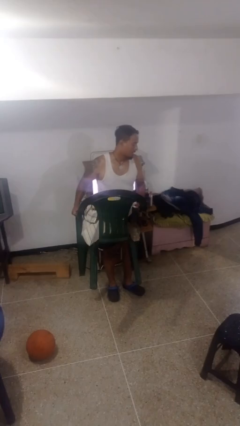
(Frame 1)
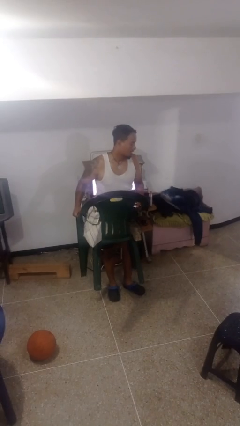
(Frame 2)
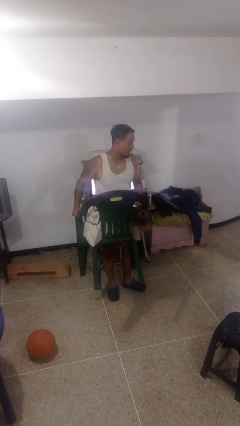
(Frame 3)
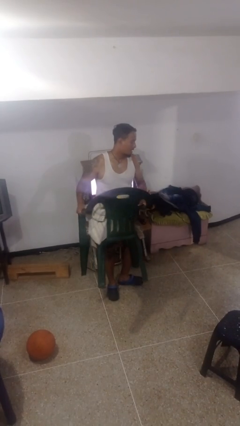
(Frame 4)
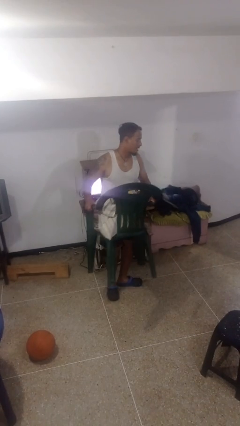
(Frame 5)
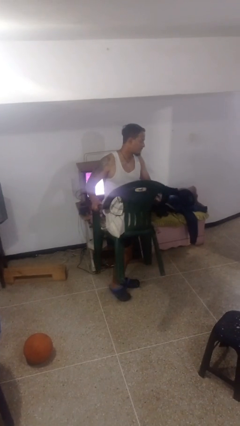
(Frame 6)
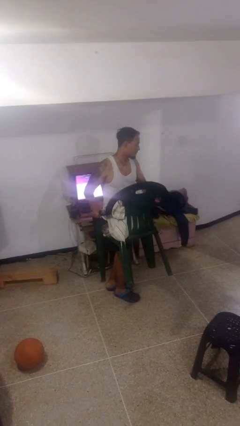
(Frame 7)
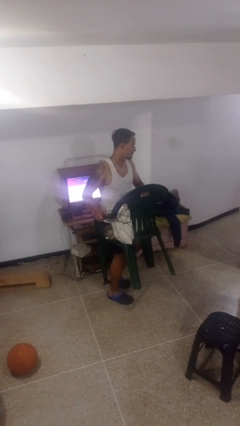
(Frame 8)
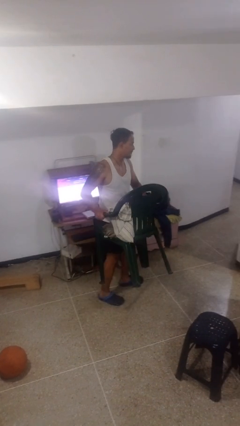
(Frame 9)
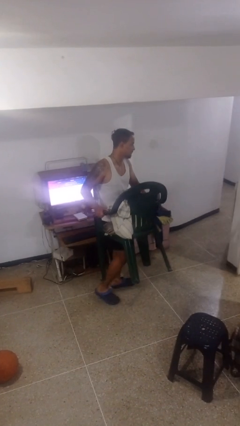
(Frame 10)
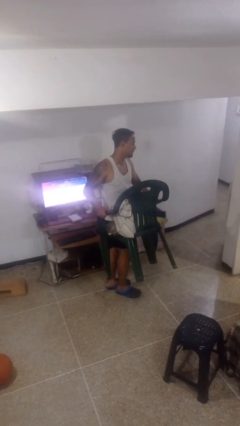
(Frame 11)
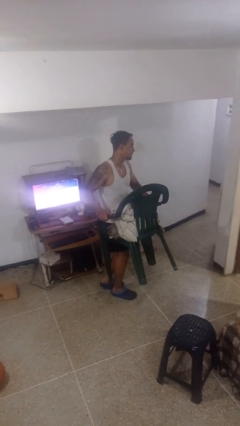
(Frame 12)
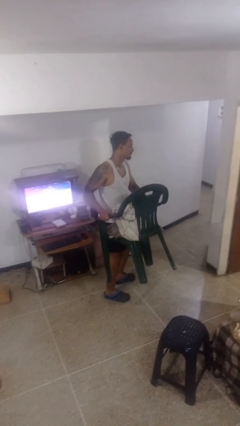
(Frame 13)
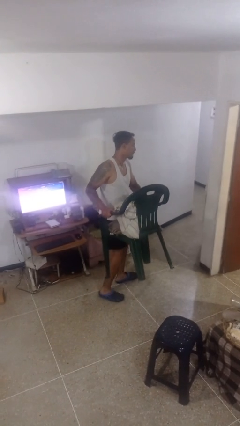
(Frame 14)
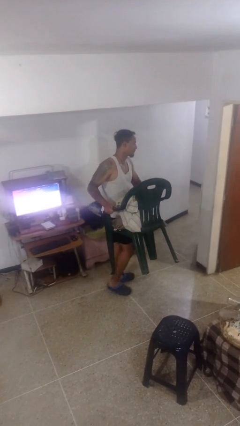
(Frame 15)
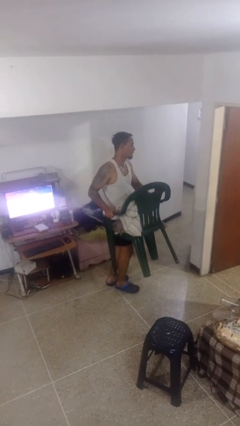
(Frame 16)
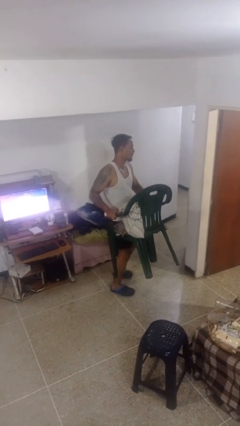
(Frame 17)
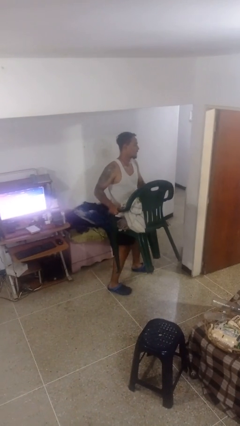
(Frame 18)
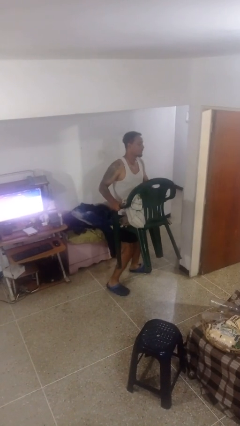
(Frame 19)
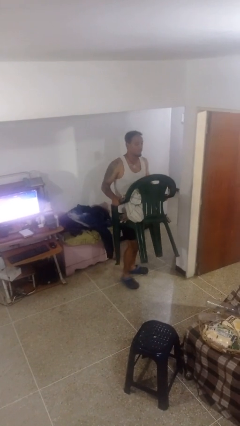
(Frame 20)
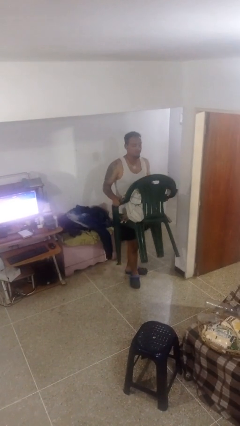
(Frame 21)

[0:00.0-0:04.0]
person carries furniture

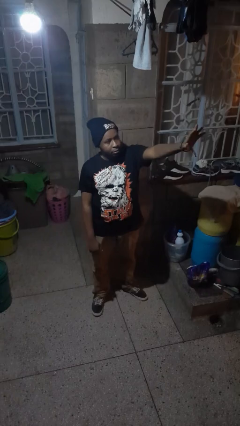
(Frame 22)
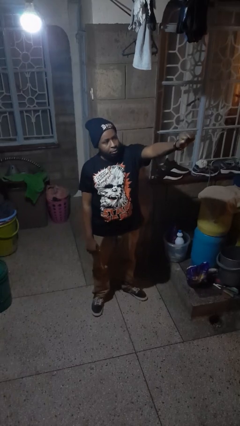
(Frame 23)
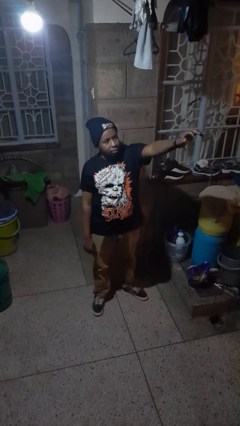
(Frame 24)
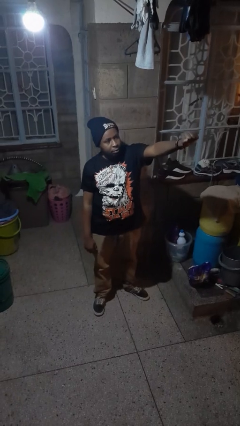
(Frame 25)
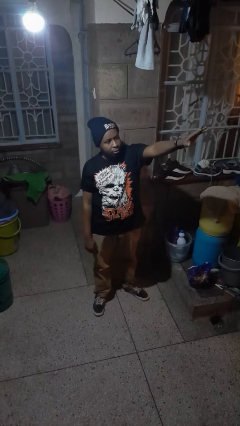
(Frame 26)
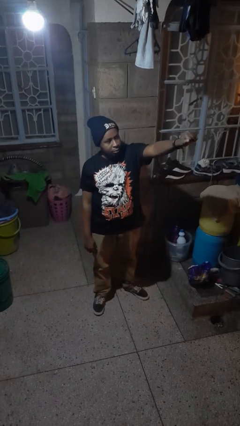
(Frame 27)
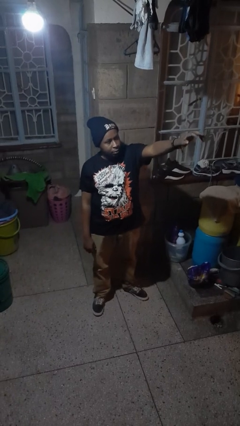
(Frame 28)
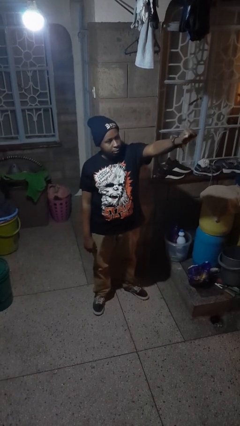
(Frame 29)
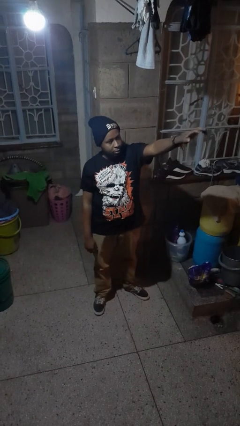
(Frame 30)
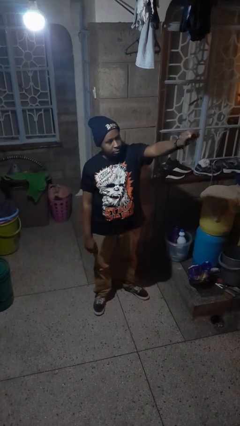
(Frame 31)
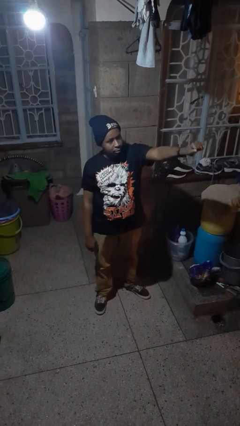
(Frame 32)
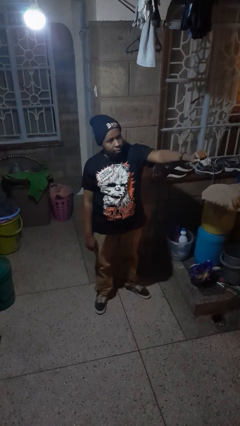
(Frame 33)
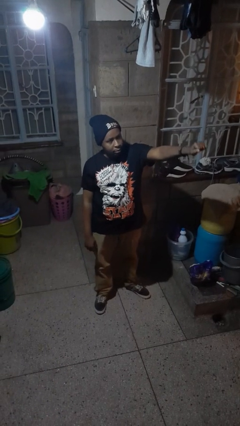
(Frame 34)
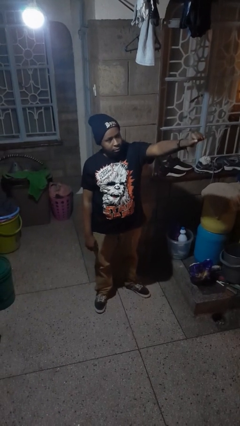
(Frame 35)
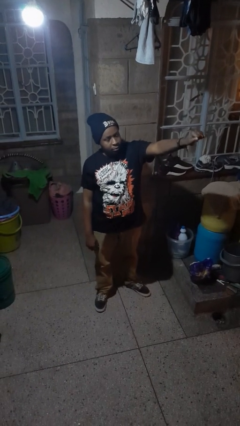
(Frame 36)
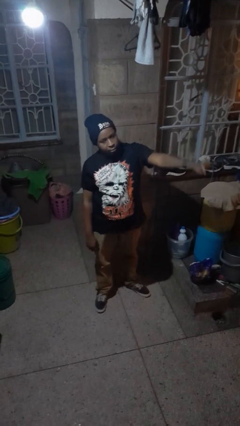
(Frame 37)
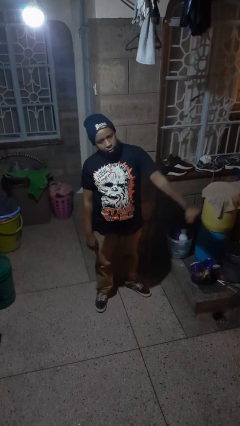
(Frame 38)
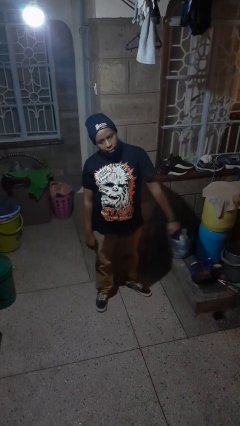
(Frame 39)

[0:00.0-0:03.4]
person gestures come here

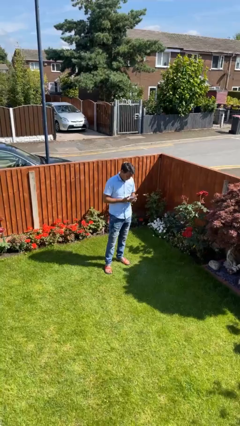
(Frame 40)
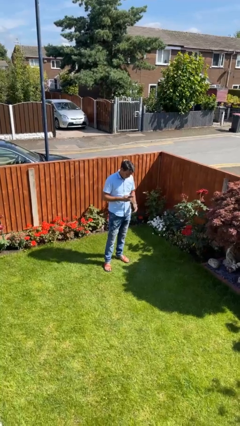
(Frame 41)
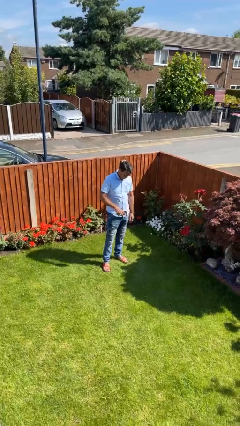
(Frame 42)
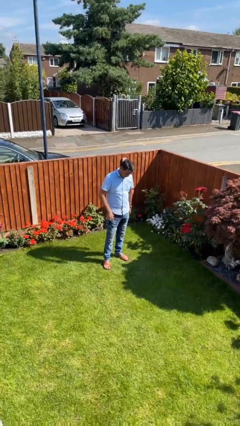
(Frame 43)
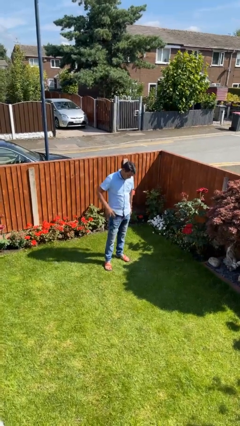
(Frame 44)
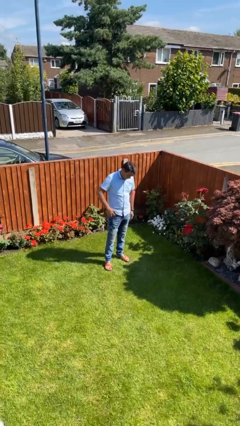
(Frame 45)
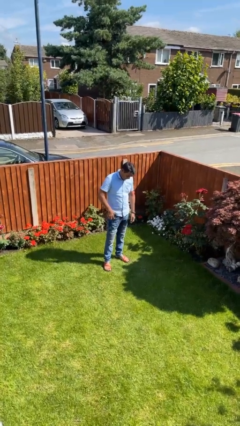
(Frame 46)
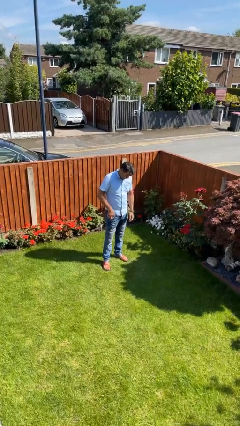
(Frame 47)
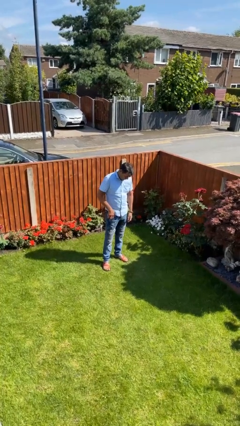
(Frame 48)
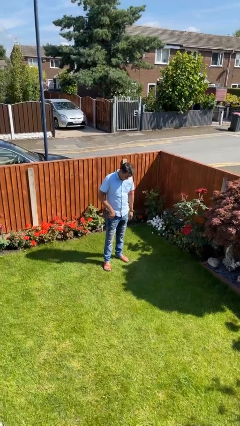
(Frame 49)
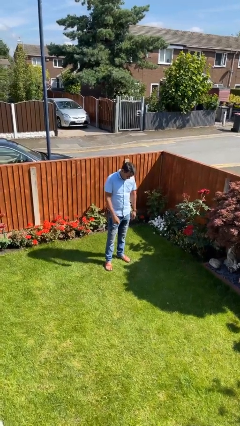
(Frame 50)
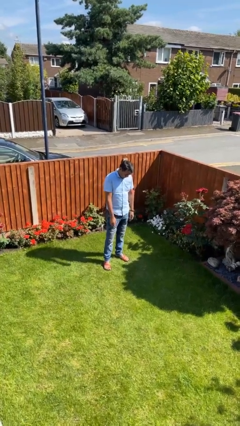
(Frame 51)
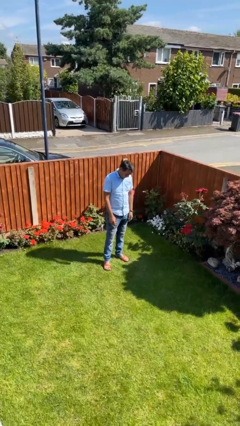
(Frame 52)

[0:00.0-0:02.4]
person puts phone into pocket

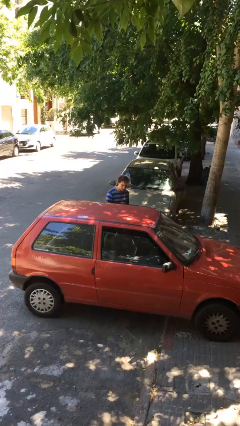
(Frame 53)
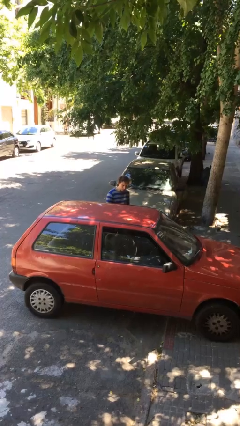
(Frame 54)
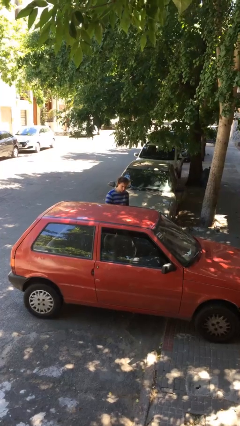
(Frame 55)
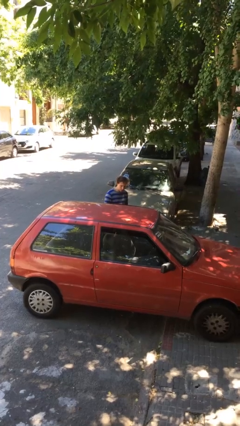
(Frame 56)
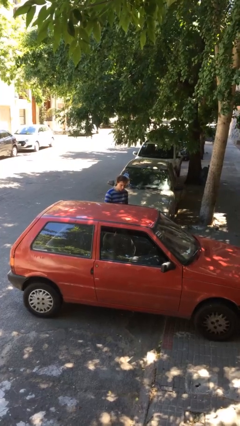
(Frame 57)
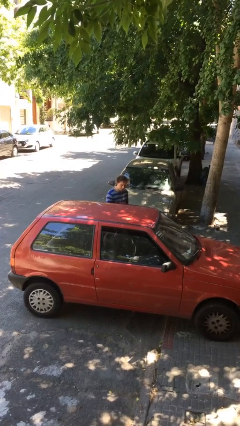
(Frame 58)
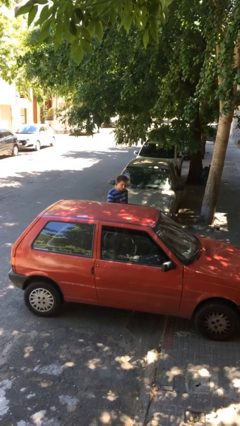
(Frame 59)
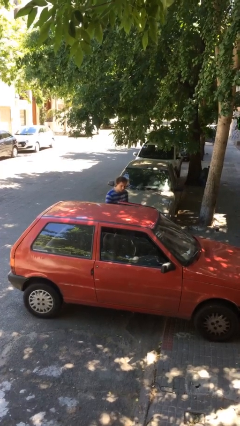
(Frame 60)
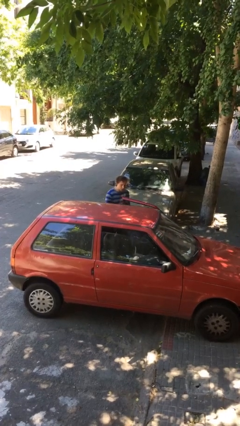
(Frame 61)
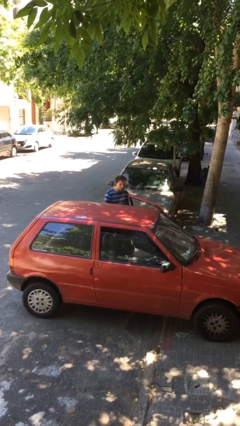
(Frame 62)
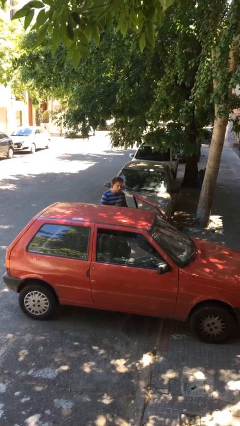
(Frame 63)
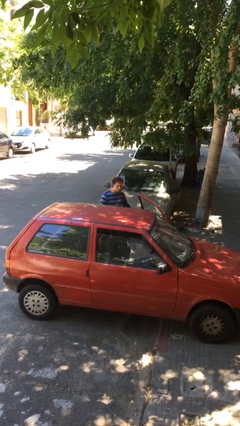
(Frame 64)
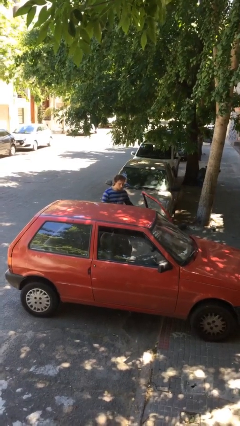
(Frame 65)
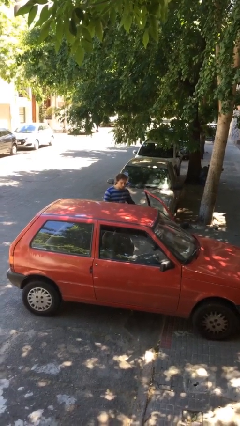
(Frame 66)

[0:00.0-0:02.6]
person opens car door

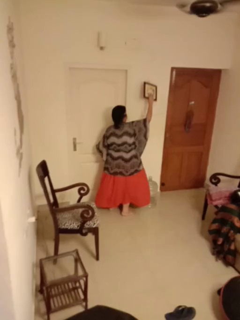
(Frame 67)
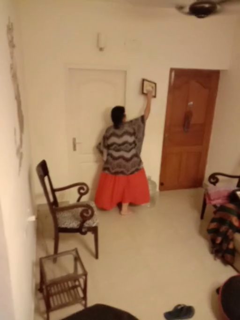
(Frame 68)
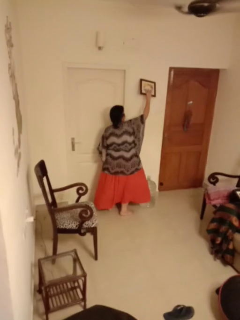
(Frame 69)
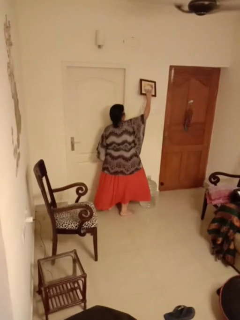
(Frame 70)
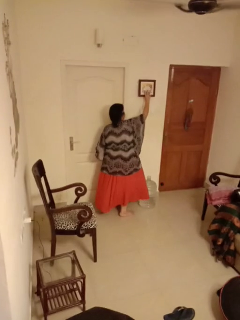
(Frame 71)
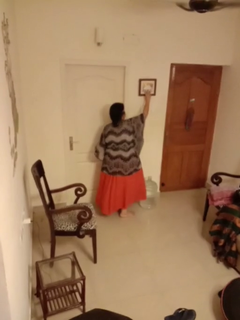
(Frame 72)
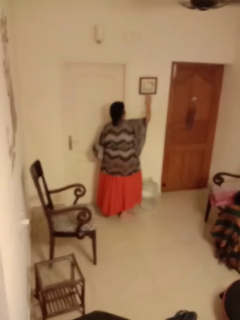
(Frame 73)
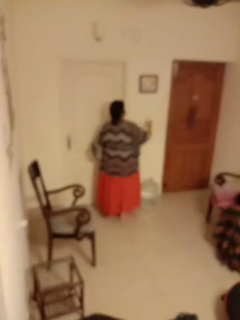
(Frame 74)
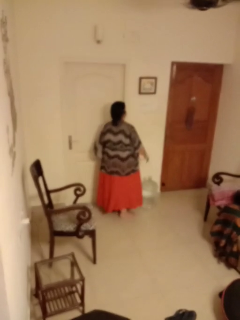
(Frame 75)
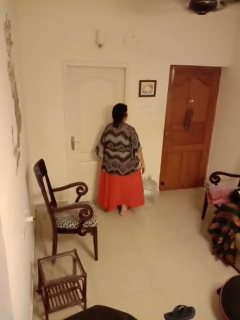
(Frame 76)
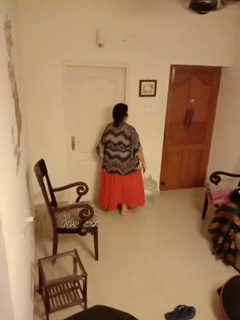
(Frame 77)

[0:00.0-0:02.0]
person puts up picture frame

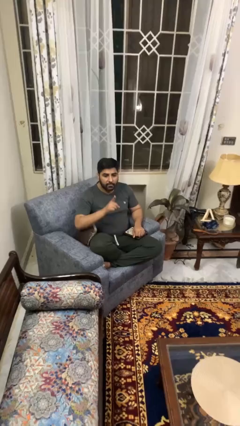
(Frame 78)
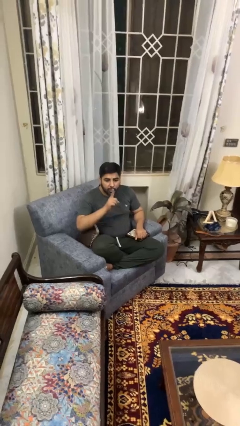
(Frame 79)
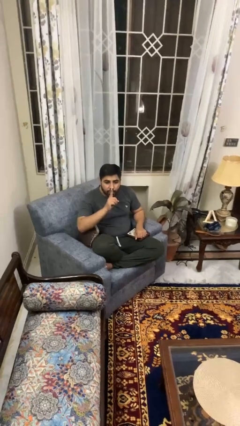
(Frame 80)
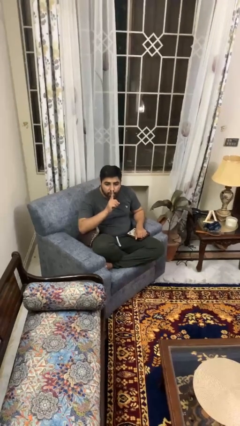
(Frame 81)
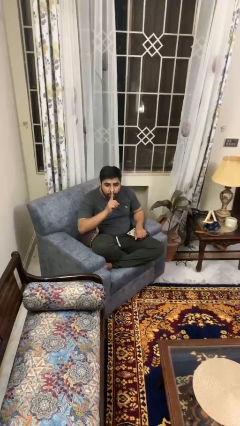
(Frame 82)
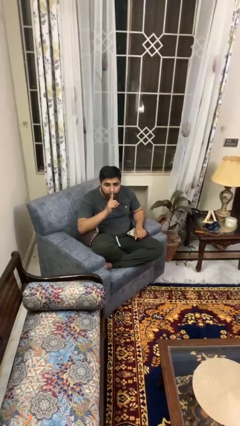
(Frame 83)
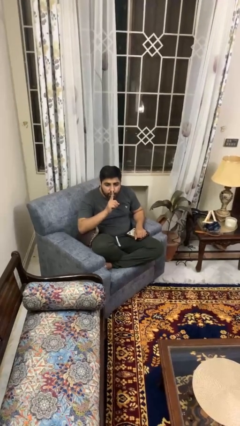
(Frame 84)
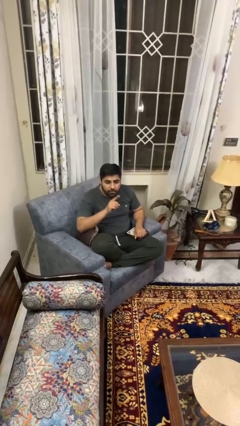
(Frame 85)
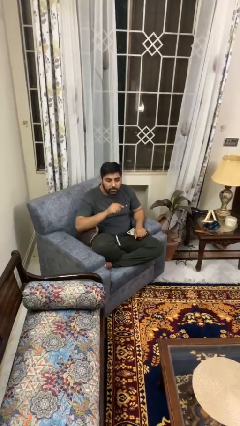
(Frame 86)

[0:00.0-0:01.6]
person gestures be quiet

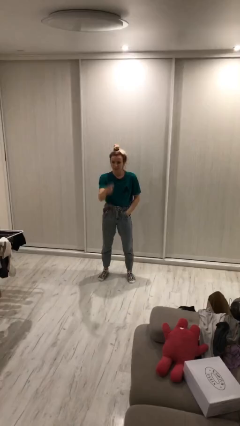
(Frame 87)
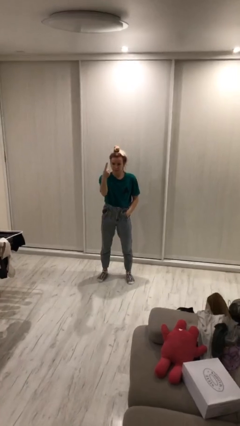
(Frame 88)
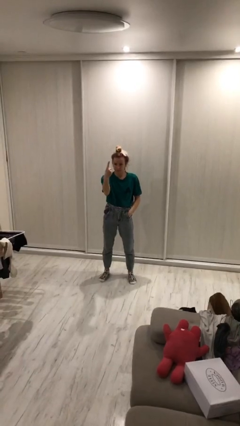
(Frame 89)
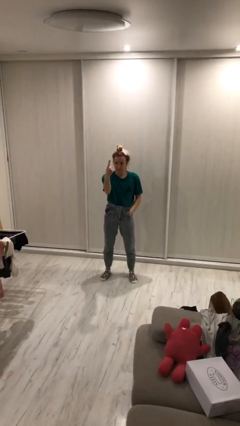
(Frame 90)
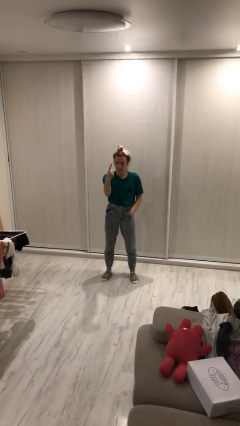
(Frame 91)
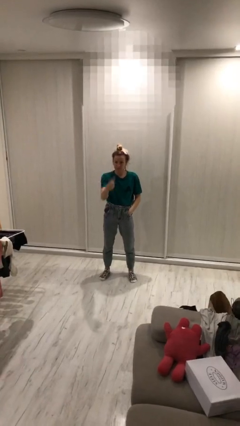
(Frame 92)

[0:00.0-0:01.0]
person gestures number one

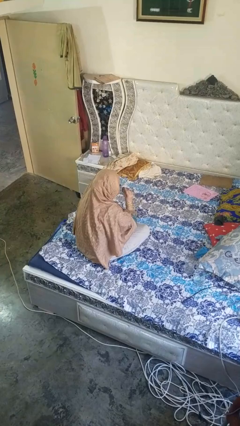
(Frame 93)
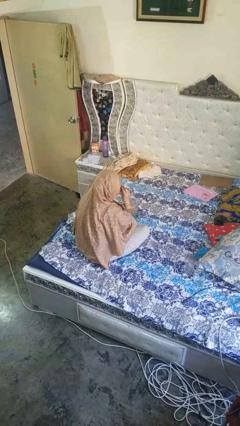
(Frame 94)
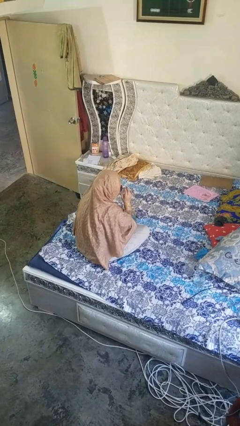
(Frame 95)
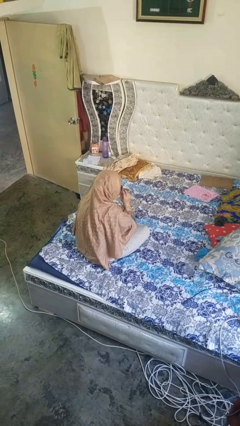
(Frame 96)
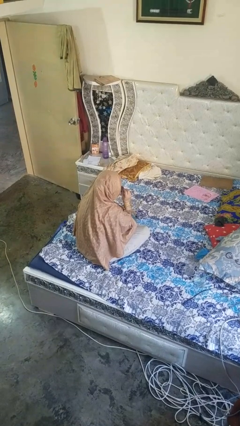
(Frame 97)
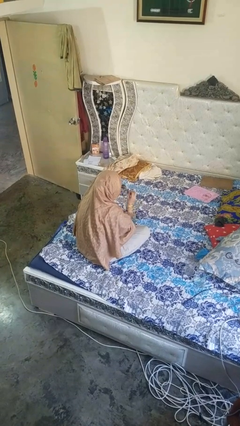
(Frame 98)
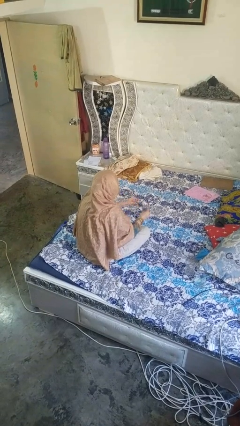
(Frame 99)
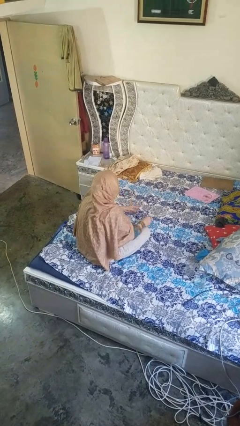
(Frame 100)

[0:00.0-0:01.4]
person takes off glasses
